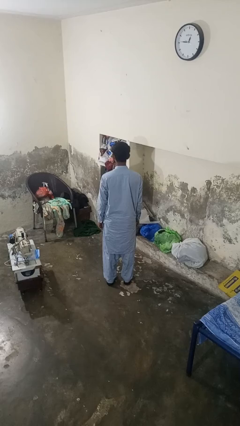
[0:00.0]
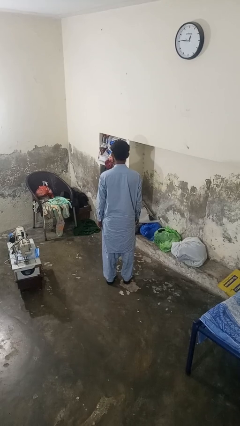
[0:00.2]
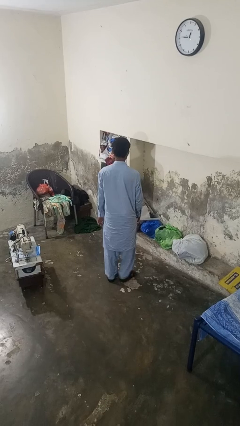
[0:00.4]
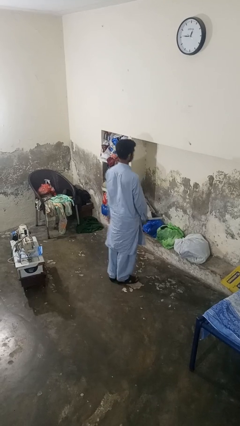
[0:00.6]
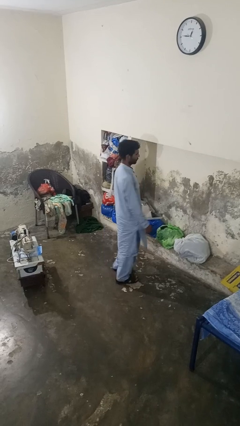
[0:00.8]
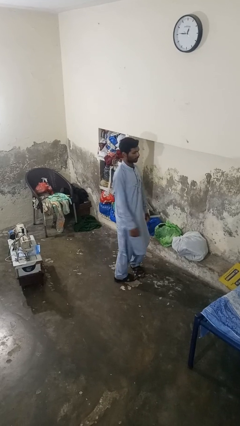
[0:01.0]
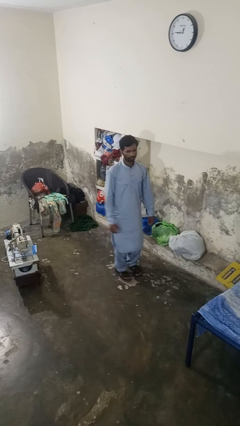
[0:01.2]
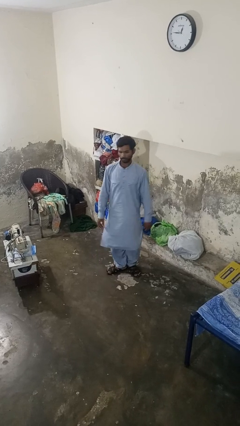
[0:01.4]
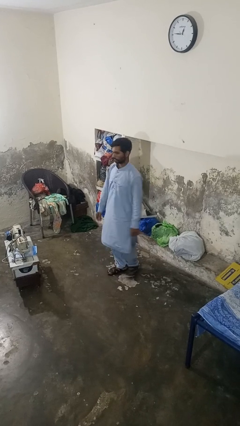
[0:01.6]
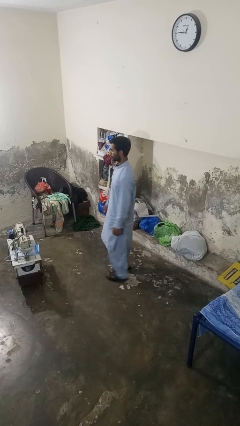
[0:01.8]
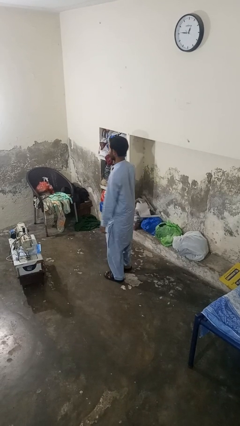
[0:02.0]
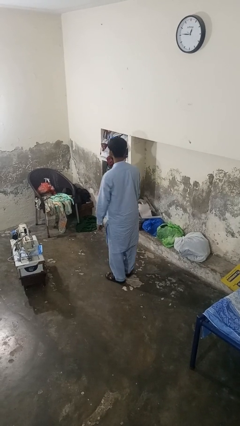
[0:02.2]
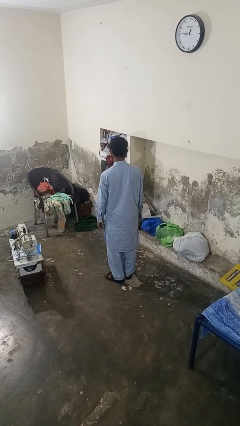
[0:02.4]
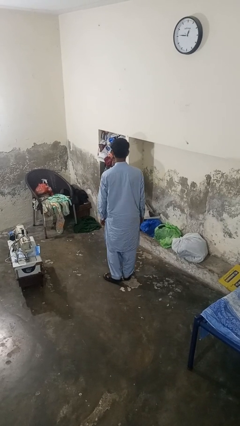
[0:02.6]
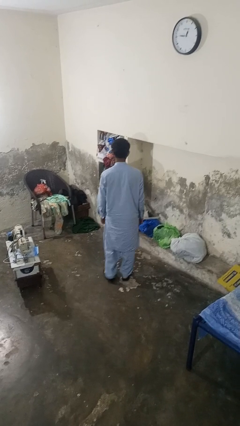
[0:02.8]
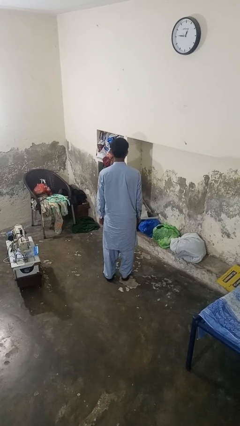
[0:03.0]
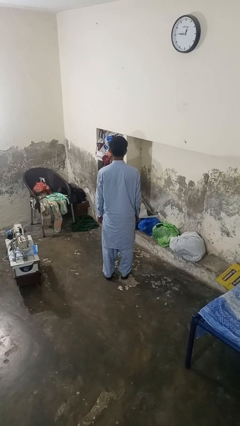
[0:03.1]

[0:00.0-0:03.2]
person twirls

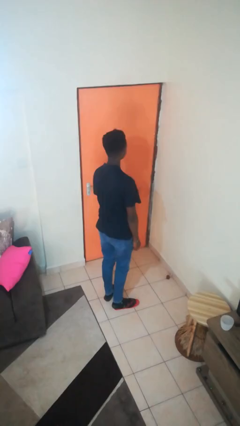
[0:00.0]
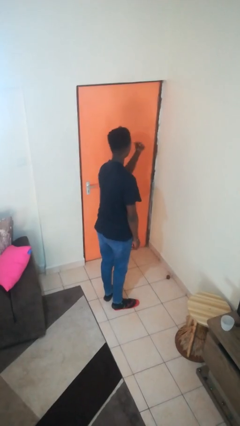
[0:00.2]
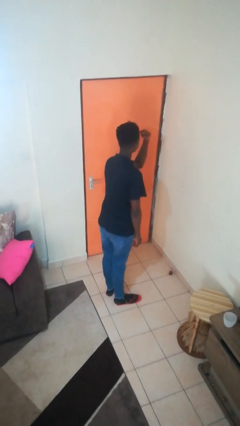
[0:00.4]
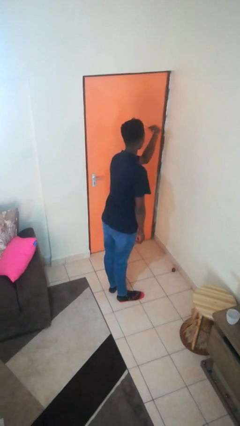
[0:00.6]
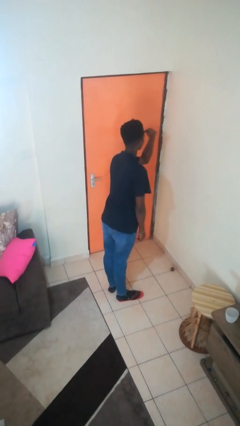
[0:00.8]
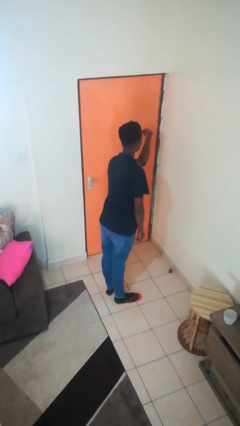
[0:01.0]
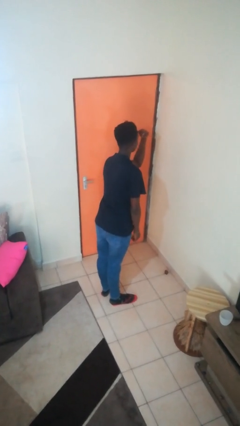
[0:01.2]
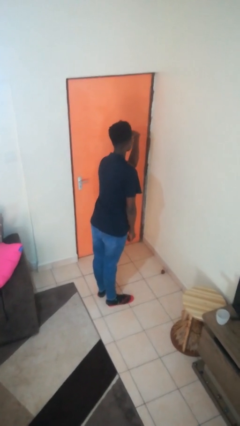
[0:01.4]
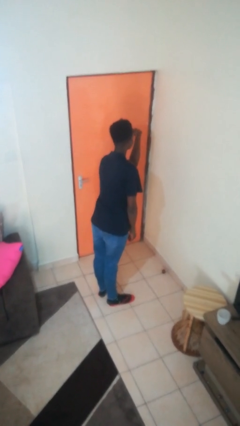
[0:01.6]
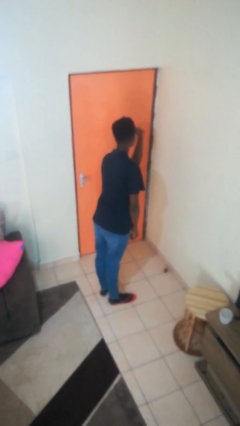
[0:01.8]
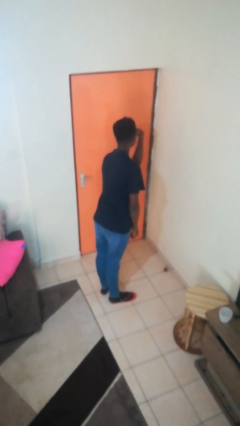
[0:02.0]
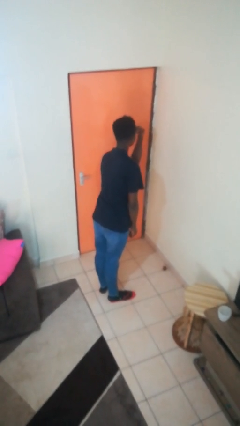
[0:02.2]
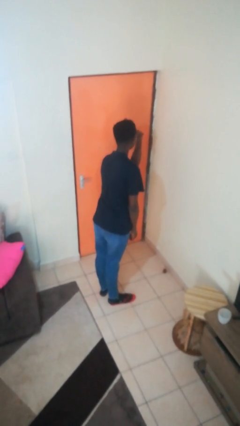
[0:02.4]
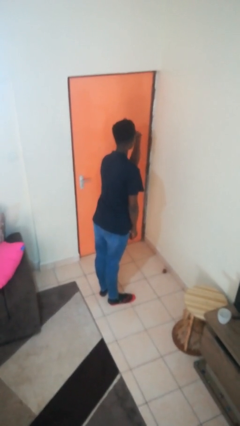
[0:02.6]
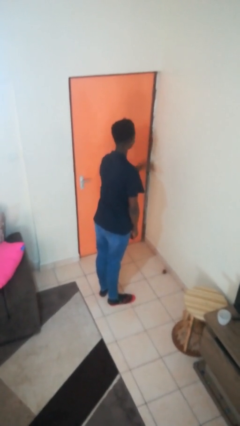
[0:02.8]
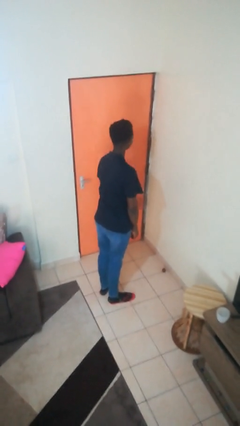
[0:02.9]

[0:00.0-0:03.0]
person gestures watch closely

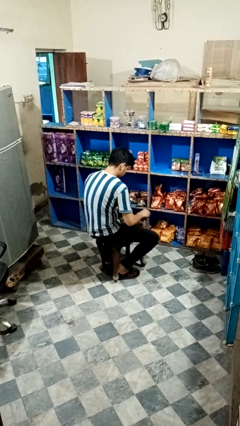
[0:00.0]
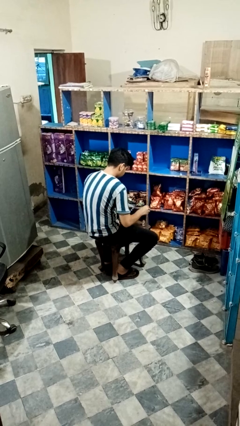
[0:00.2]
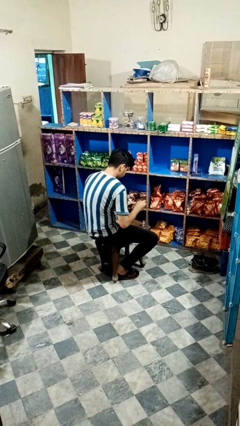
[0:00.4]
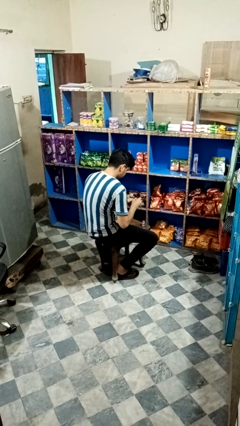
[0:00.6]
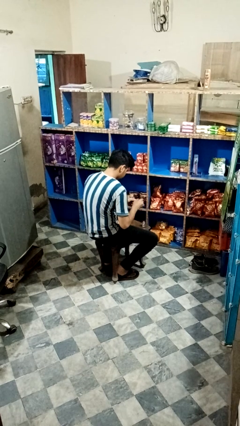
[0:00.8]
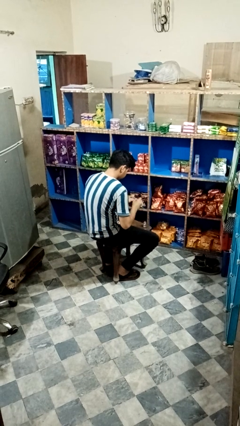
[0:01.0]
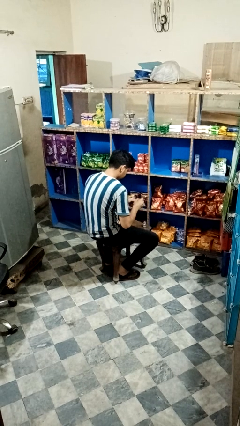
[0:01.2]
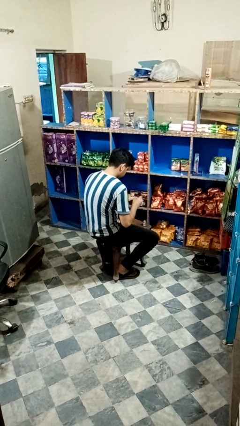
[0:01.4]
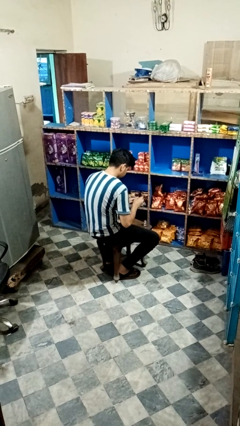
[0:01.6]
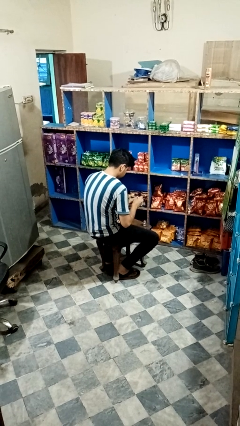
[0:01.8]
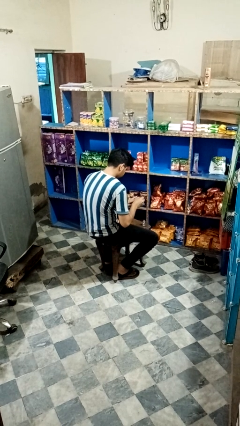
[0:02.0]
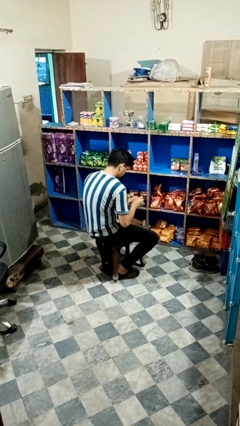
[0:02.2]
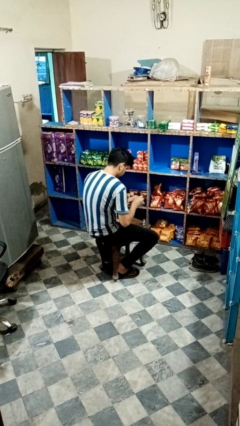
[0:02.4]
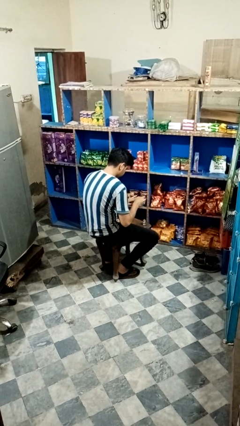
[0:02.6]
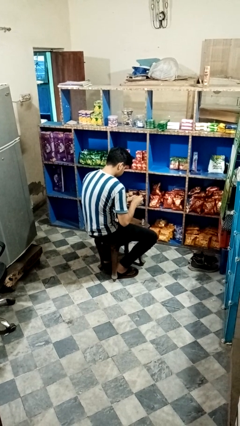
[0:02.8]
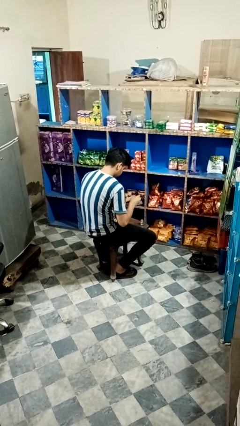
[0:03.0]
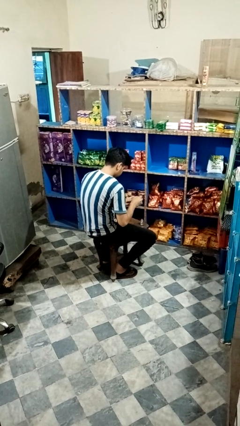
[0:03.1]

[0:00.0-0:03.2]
person paints fingernails

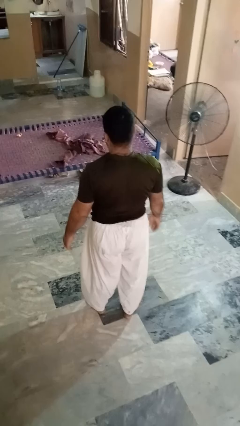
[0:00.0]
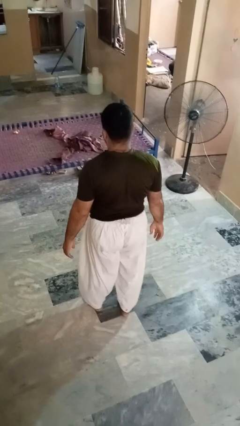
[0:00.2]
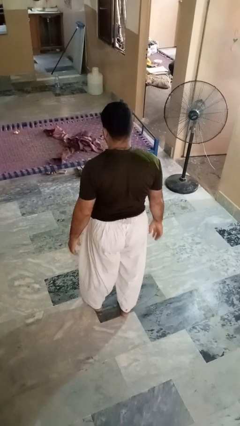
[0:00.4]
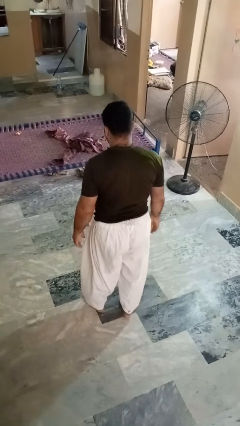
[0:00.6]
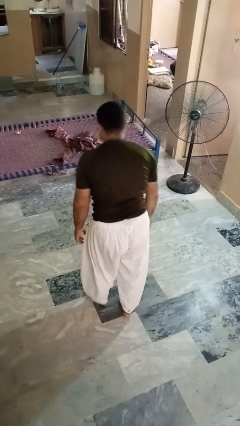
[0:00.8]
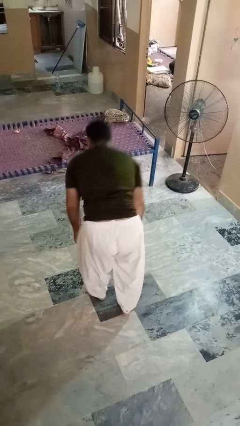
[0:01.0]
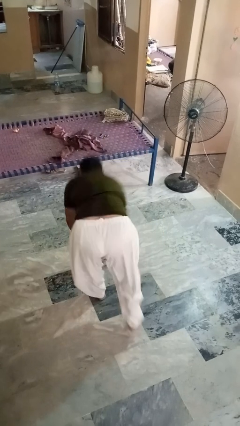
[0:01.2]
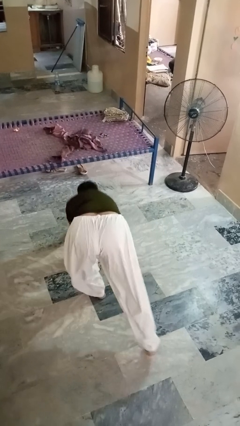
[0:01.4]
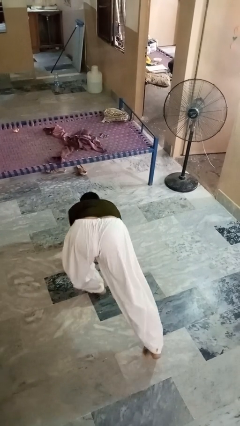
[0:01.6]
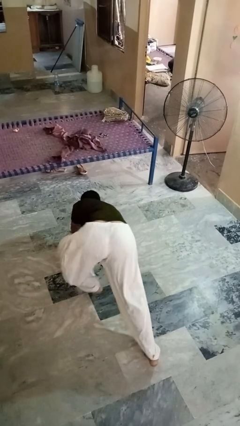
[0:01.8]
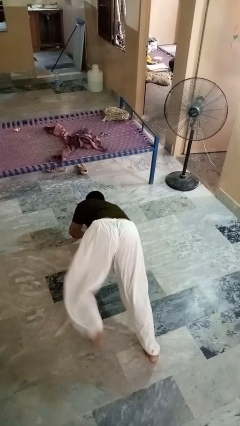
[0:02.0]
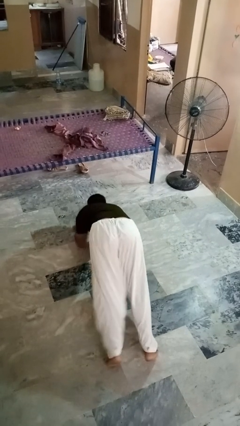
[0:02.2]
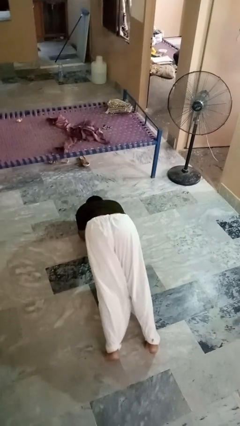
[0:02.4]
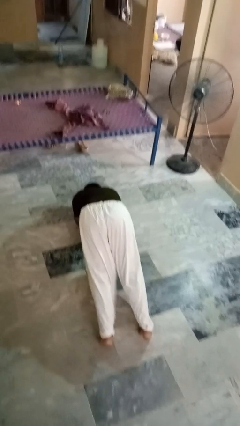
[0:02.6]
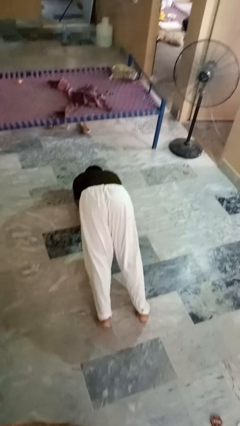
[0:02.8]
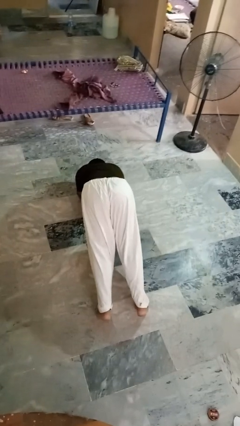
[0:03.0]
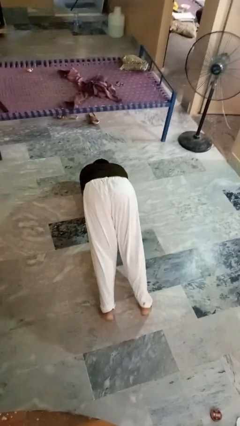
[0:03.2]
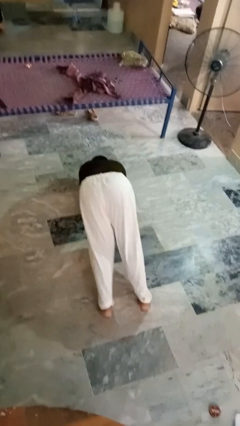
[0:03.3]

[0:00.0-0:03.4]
person exercises with plank

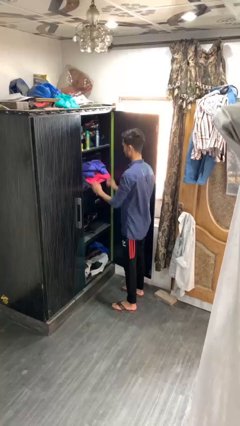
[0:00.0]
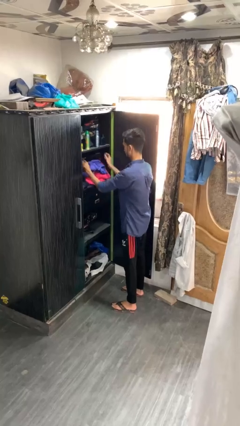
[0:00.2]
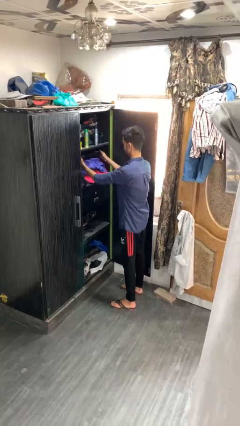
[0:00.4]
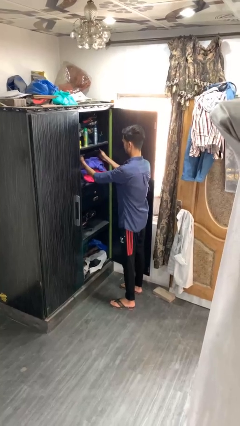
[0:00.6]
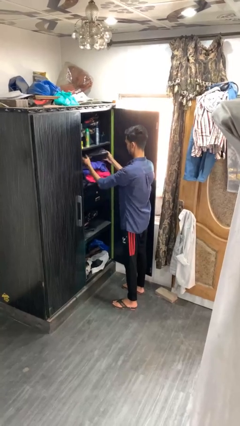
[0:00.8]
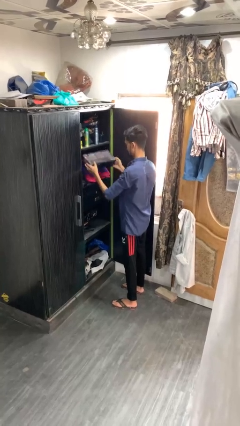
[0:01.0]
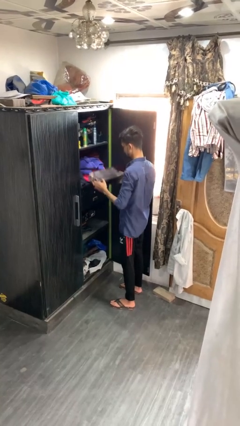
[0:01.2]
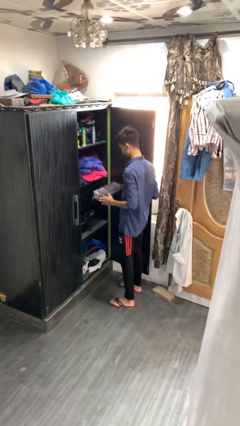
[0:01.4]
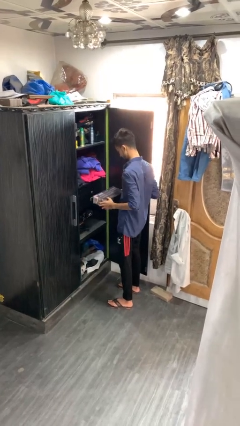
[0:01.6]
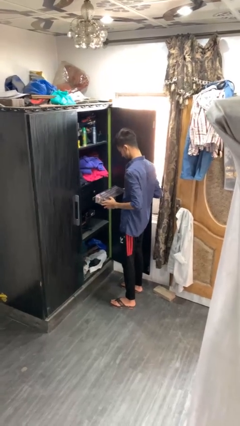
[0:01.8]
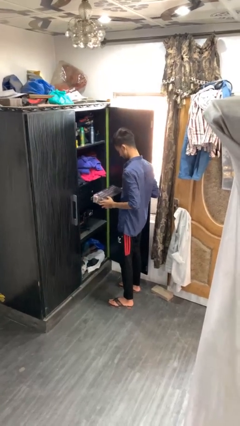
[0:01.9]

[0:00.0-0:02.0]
person picks up object from cabinet

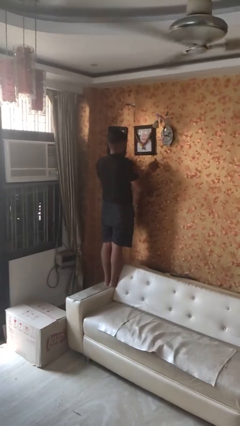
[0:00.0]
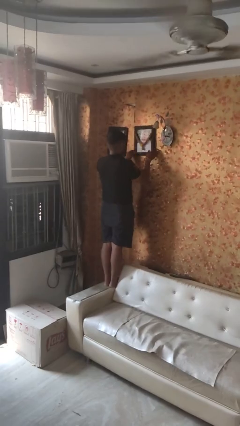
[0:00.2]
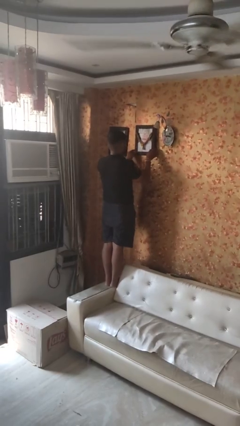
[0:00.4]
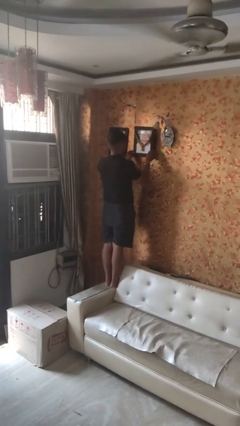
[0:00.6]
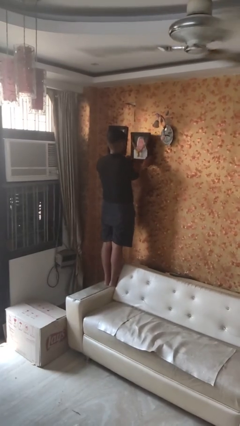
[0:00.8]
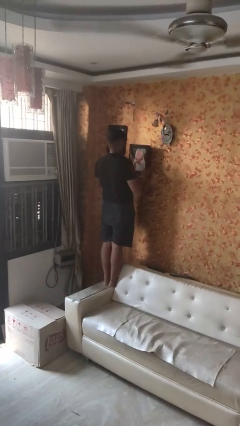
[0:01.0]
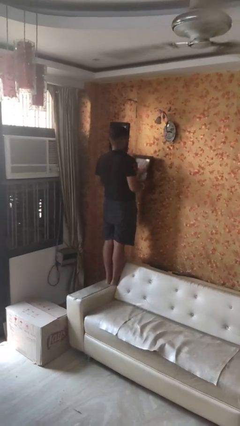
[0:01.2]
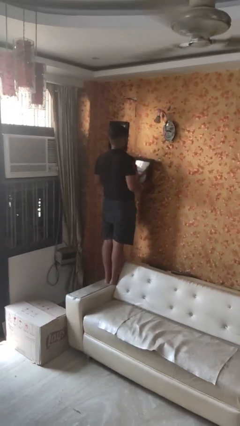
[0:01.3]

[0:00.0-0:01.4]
person takes down picture frame

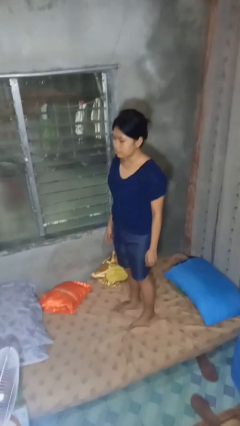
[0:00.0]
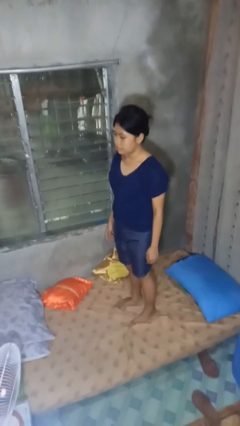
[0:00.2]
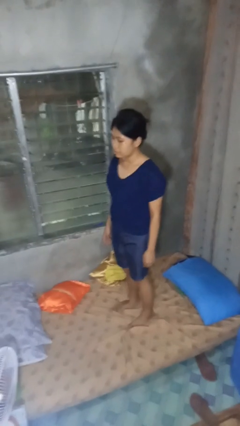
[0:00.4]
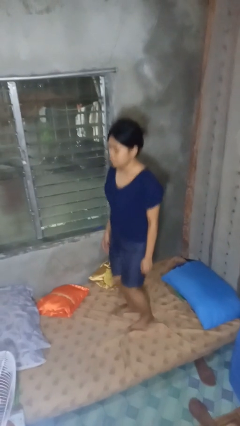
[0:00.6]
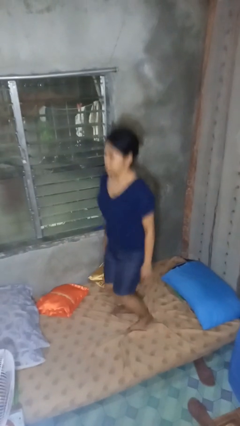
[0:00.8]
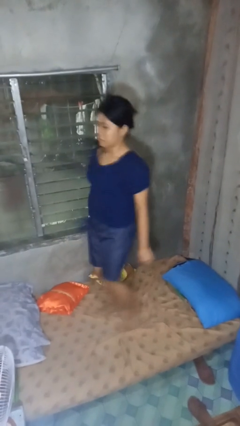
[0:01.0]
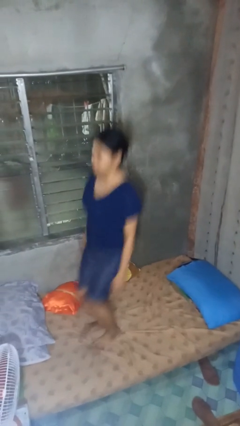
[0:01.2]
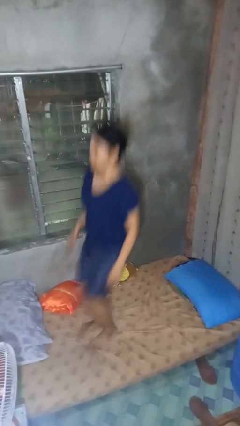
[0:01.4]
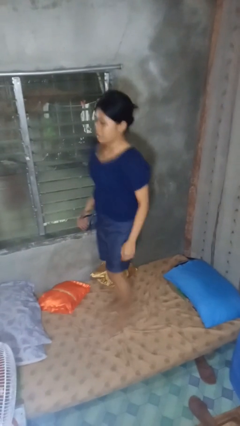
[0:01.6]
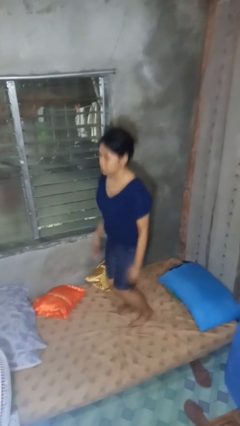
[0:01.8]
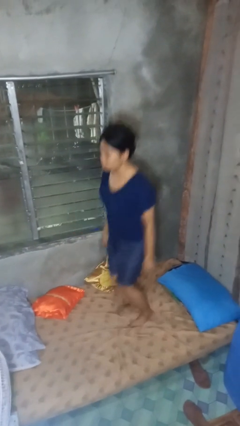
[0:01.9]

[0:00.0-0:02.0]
person jumps on bed
